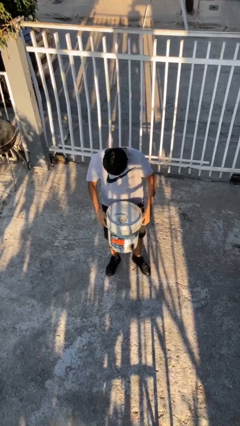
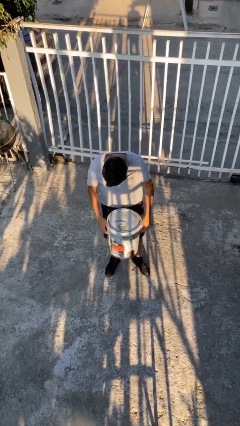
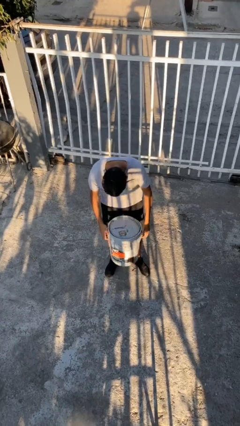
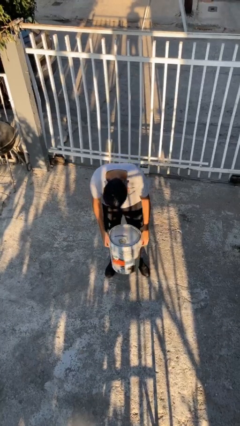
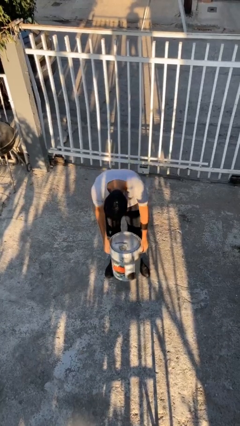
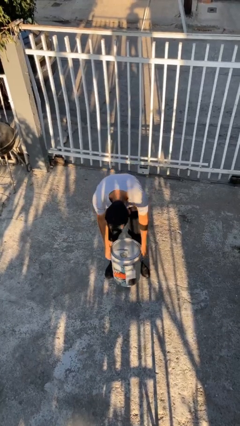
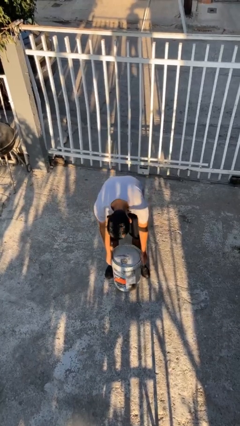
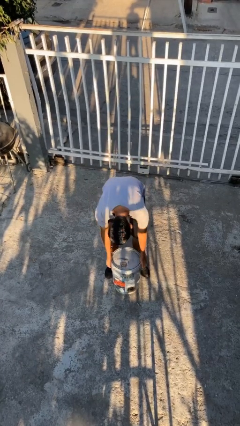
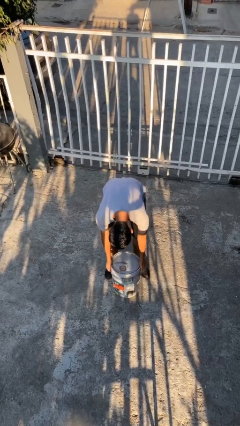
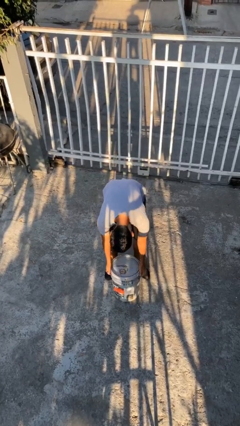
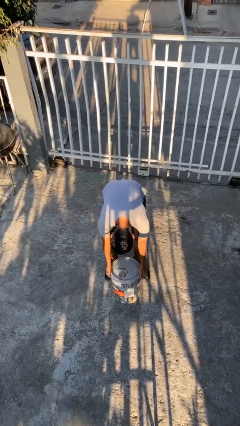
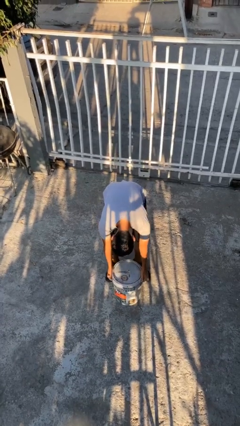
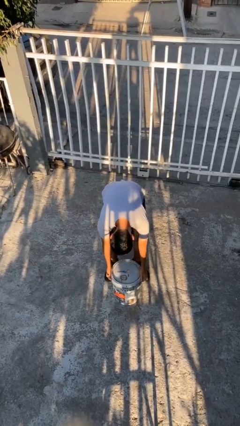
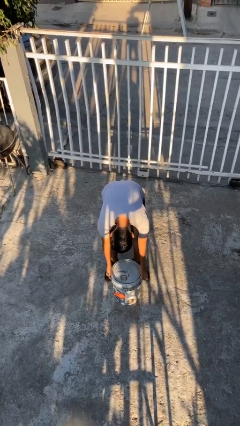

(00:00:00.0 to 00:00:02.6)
person puts down object on floor

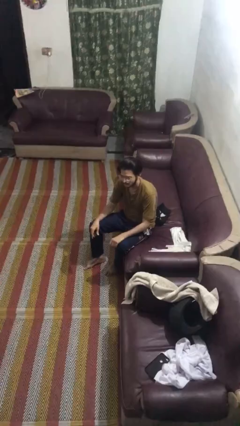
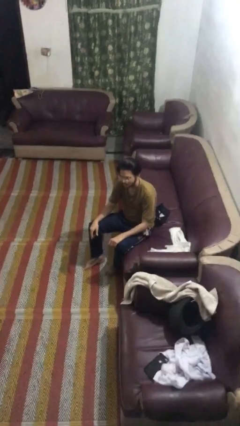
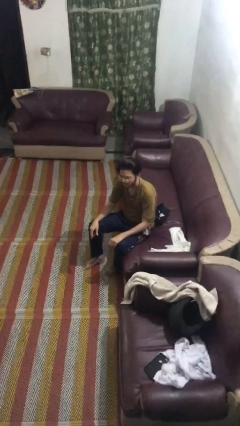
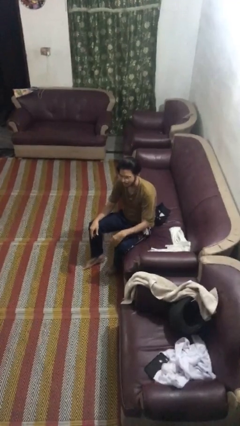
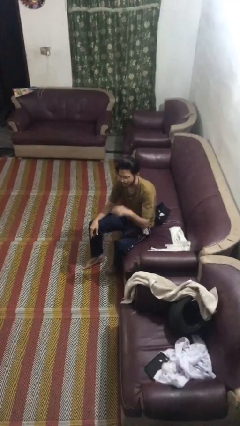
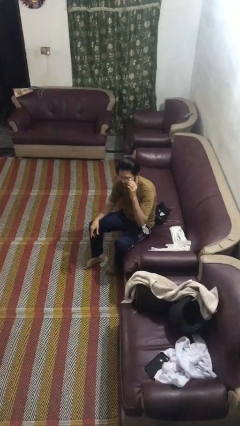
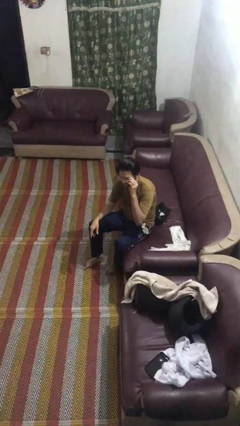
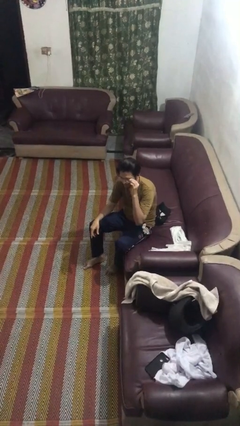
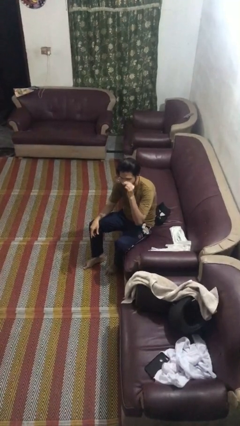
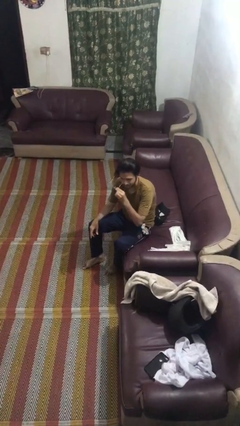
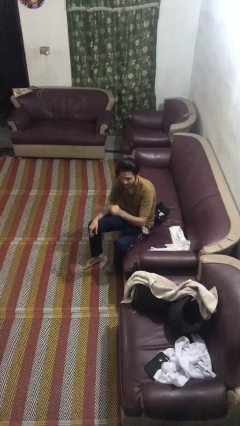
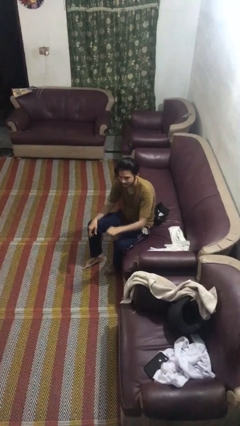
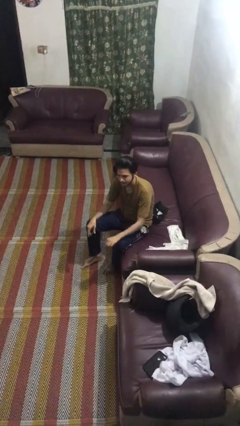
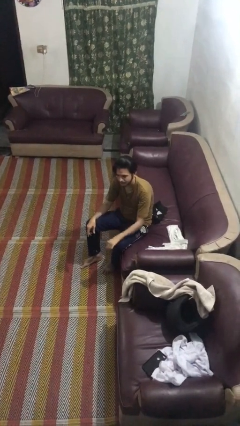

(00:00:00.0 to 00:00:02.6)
person takes off glasses

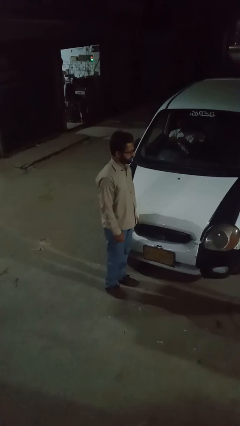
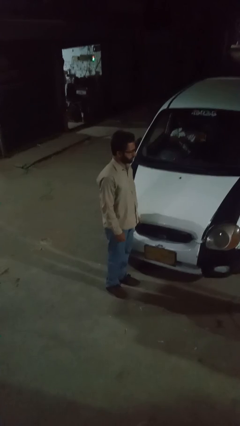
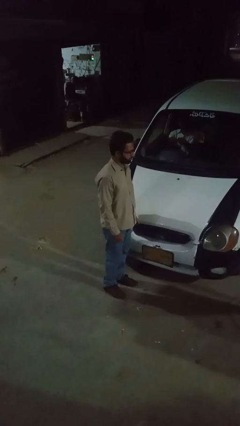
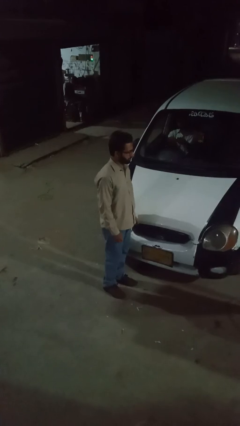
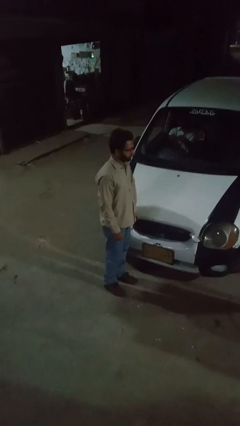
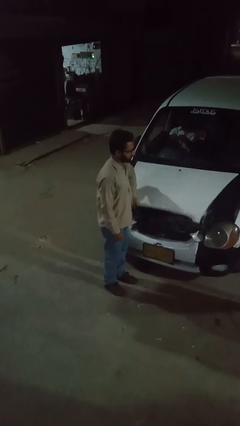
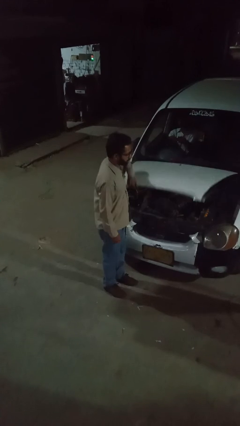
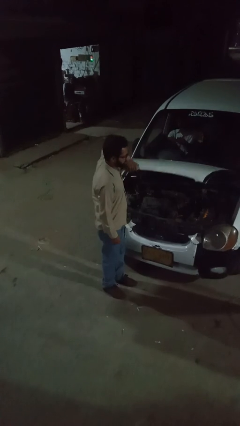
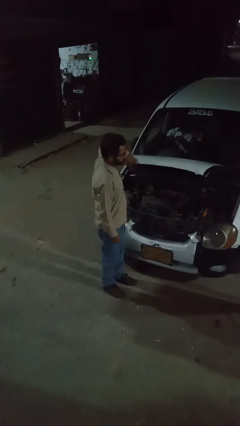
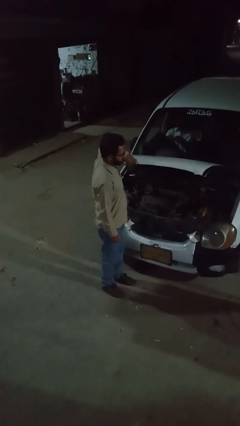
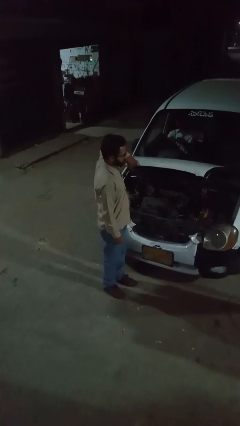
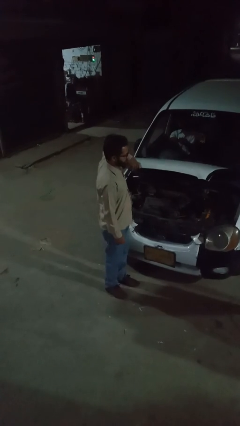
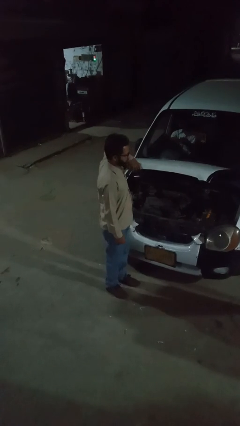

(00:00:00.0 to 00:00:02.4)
person opens car hood

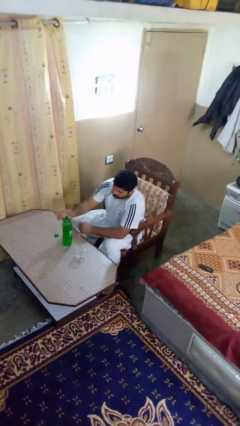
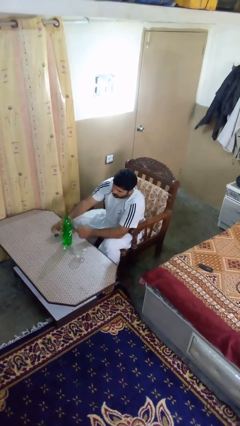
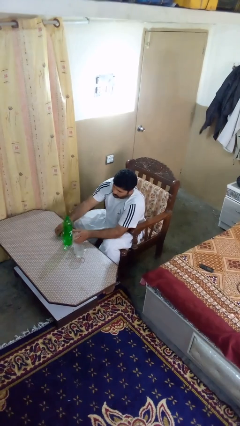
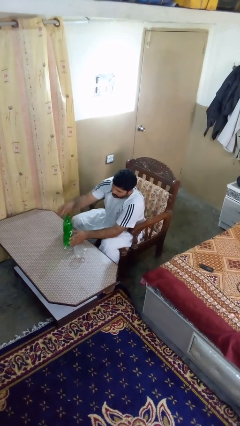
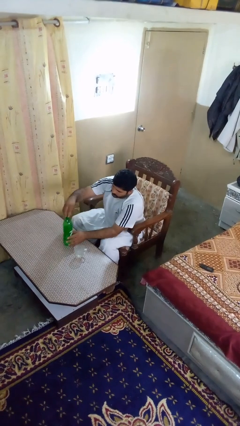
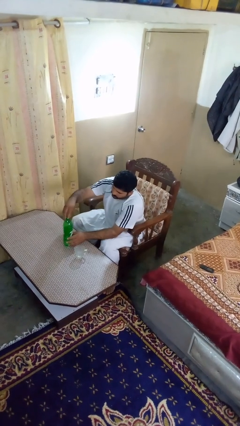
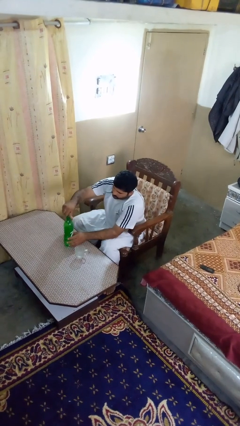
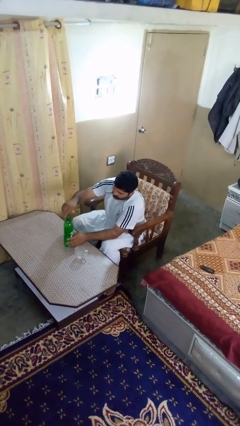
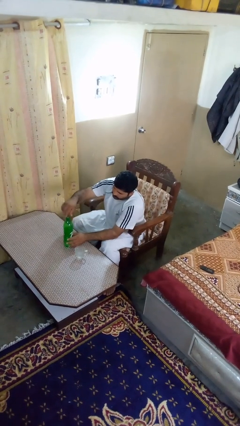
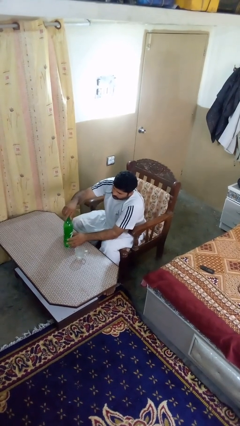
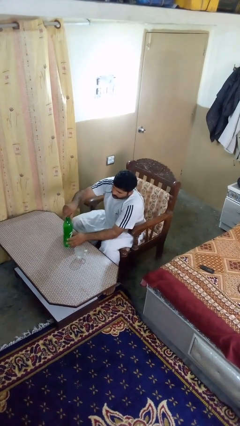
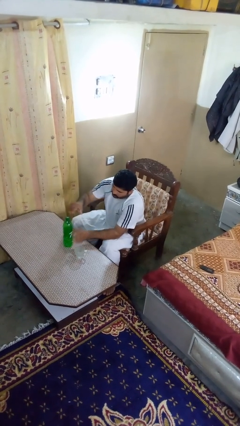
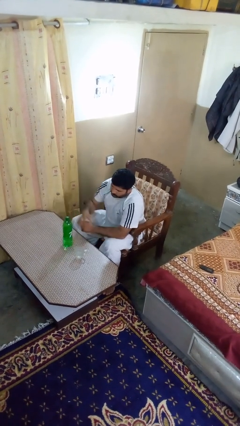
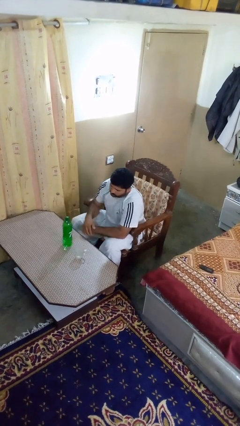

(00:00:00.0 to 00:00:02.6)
person screws lid to bottle

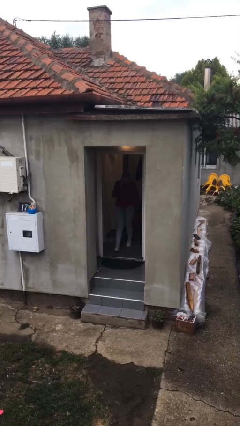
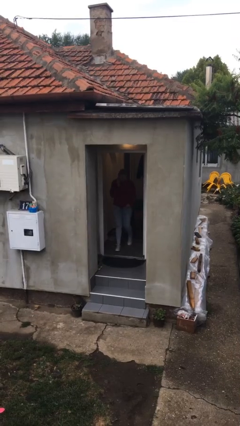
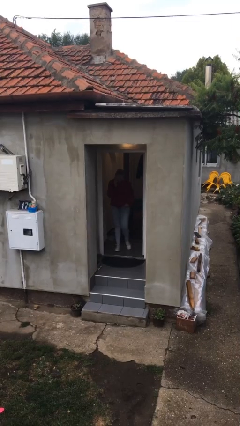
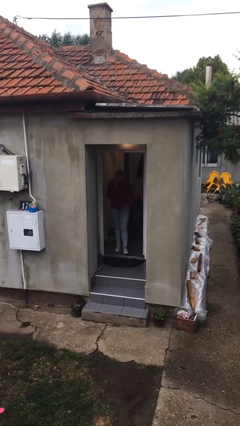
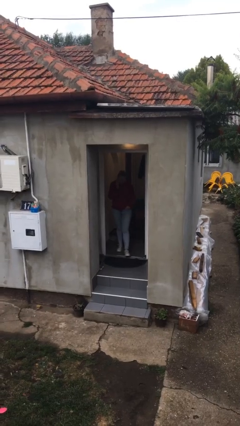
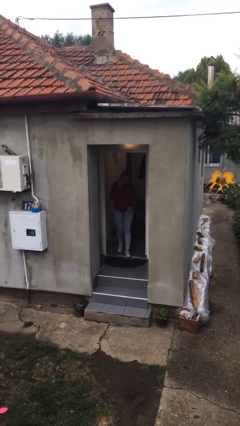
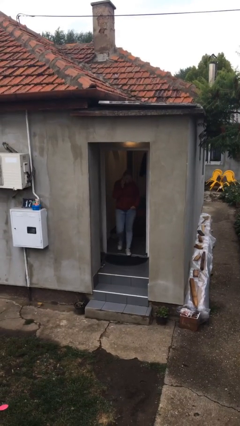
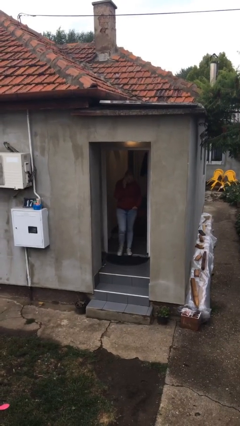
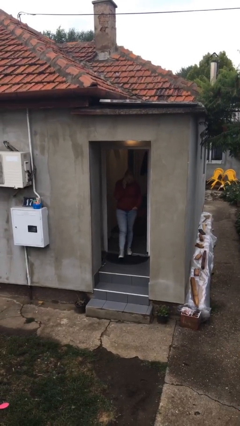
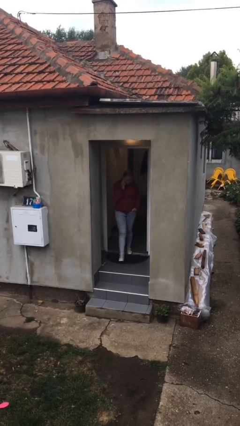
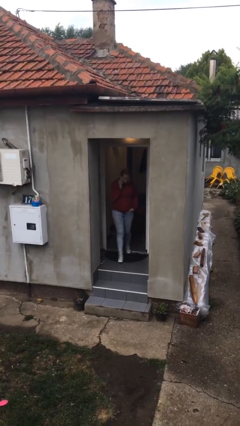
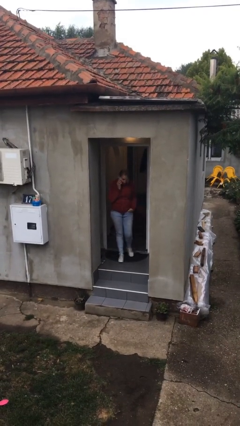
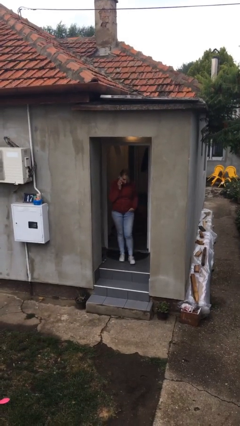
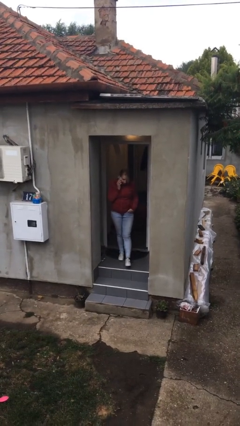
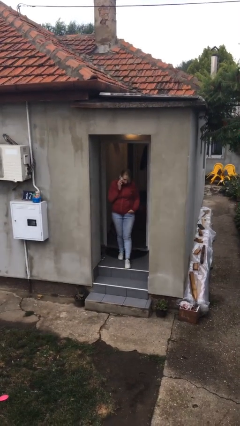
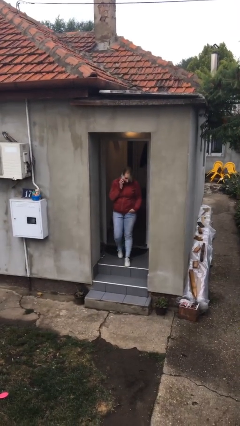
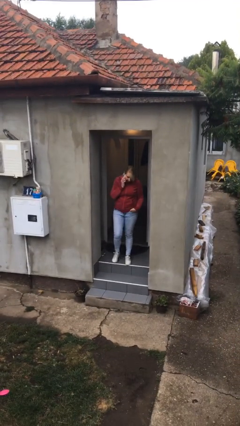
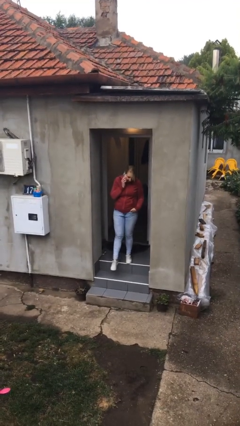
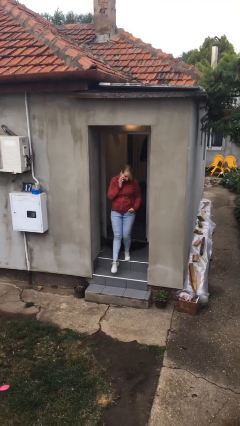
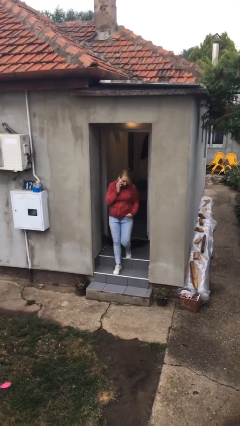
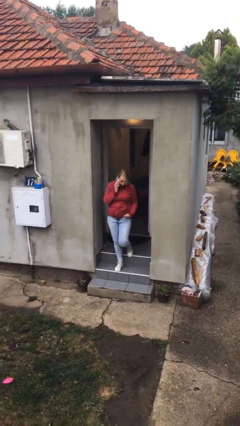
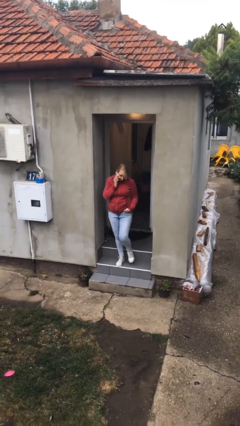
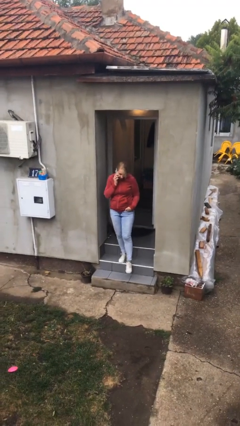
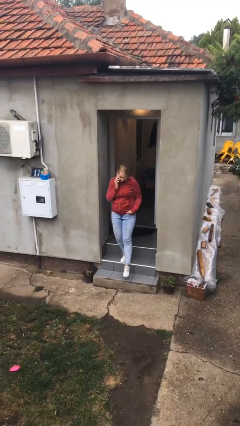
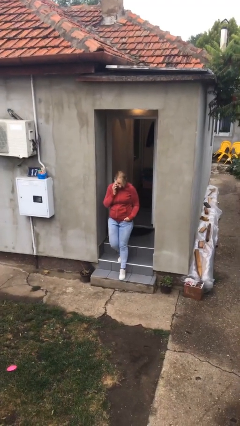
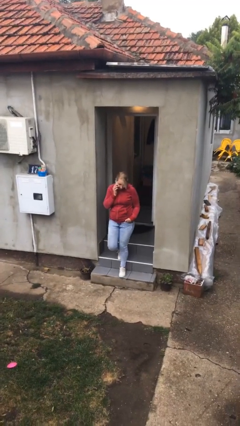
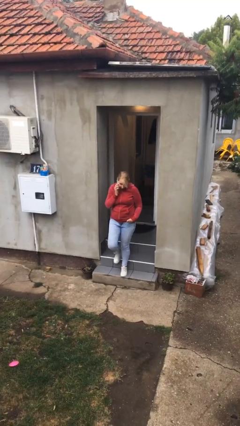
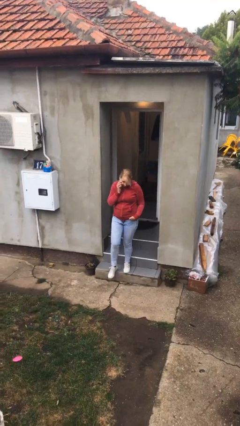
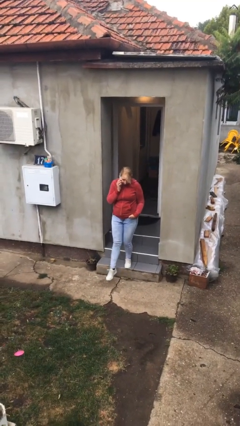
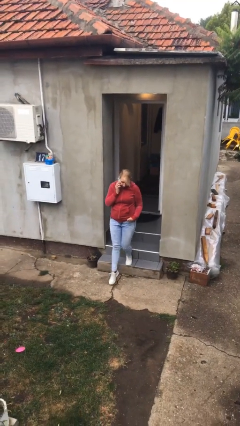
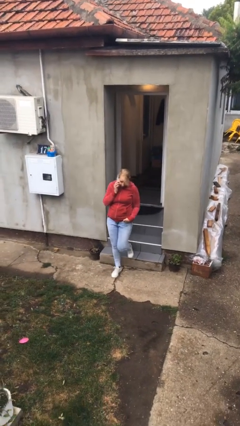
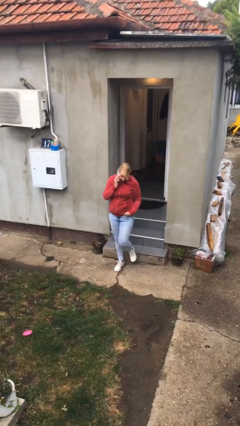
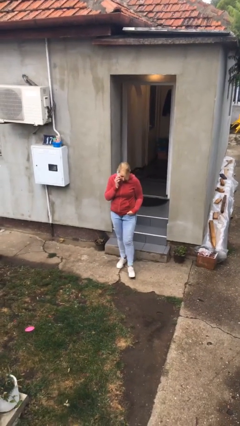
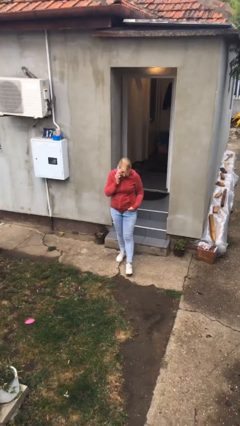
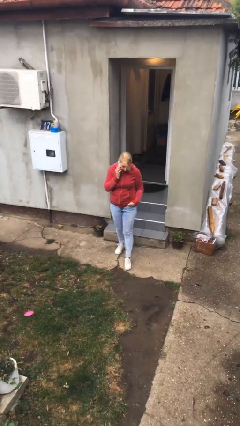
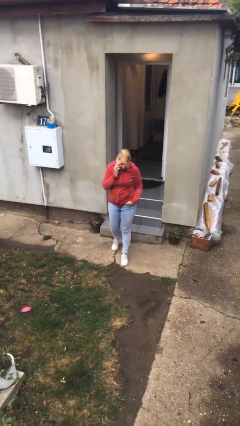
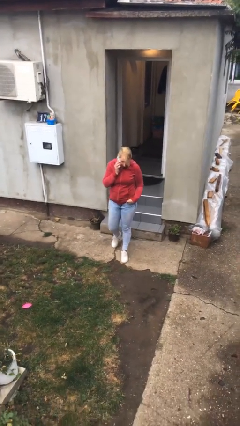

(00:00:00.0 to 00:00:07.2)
person enters scene through structure
